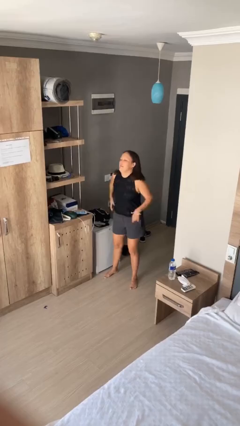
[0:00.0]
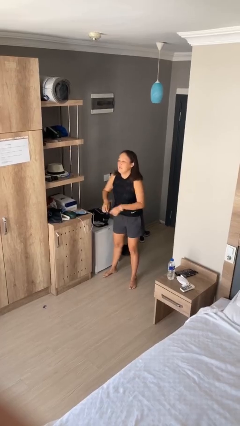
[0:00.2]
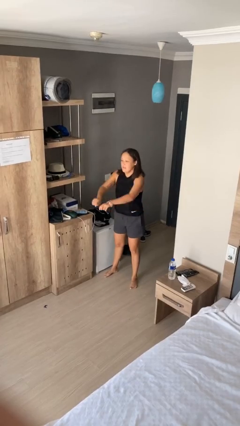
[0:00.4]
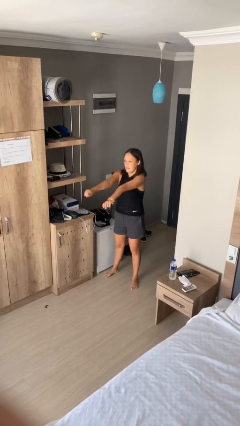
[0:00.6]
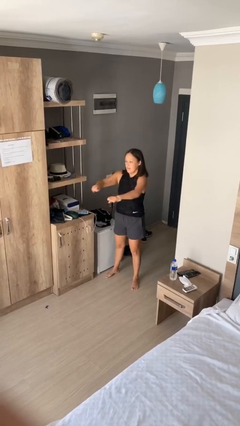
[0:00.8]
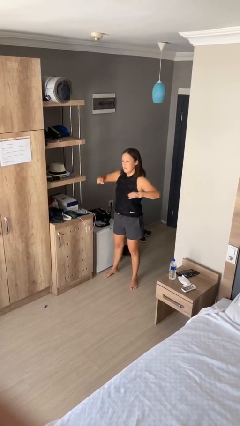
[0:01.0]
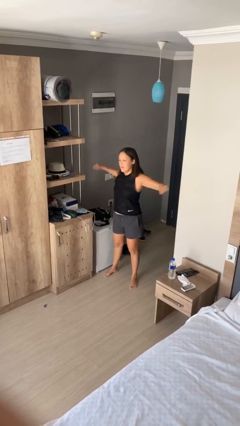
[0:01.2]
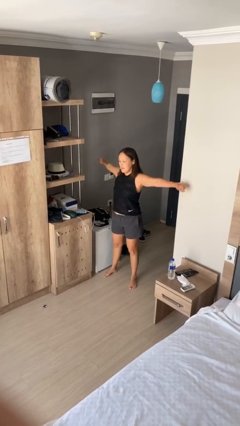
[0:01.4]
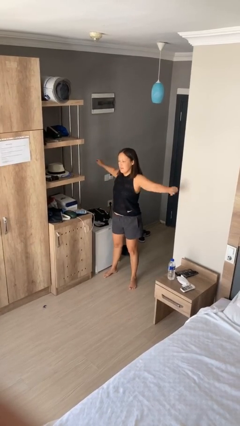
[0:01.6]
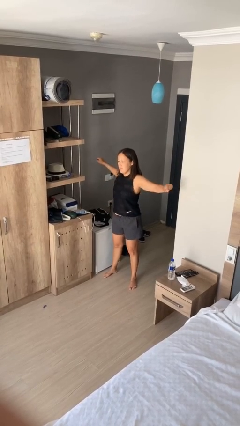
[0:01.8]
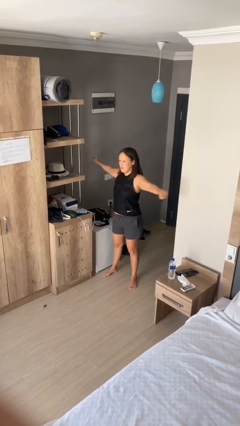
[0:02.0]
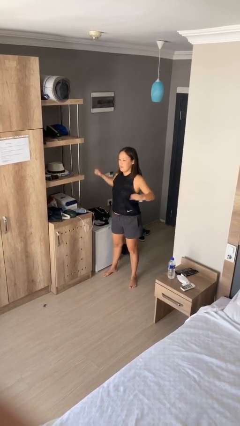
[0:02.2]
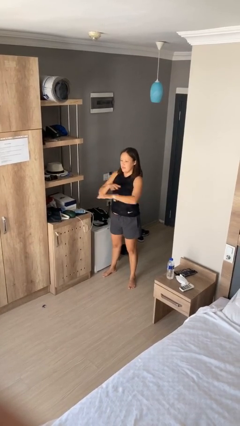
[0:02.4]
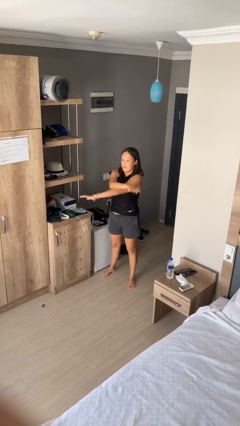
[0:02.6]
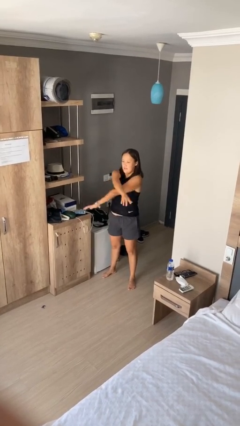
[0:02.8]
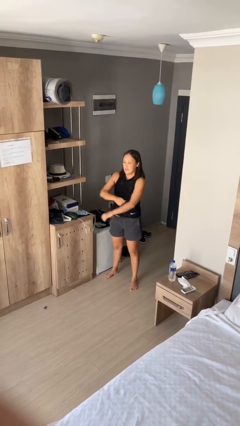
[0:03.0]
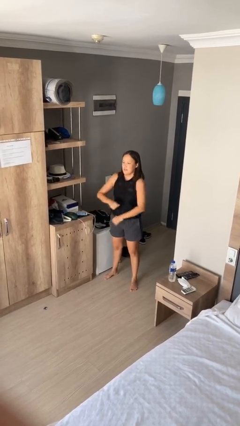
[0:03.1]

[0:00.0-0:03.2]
person stretches arms to side

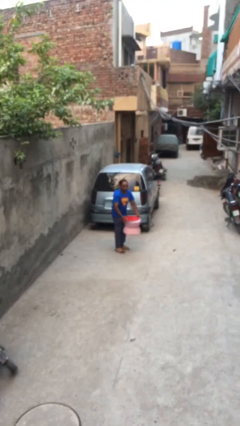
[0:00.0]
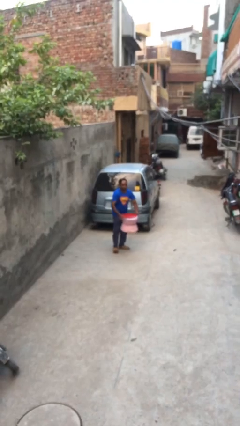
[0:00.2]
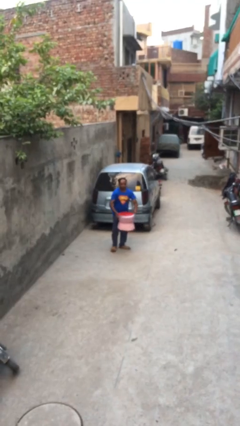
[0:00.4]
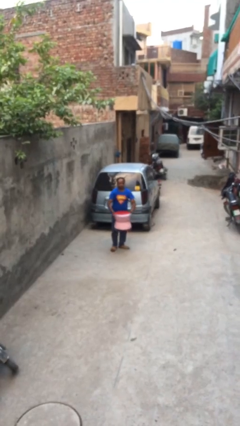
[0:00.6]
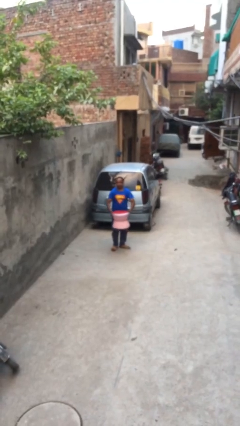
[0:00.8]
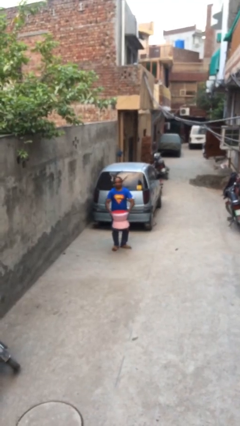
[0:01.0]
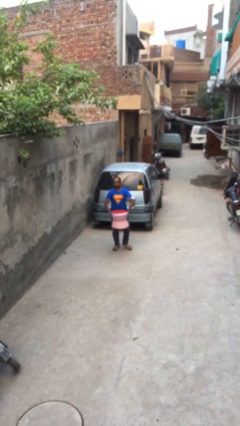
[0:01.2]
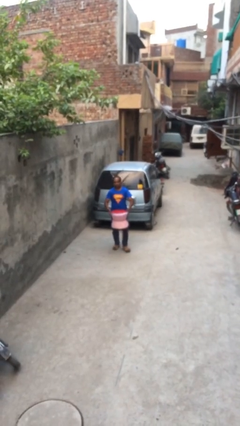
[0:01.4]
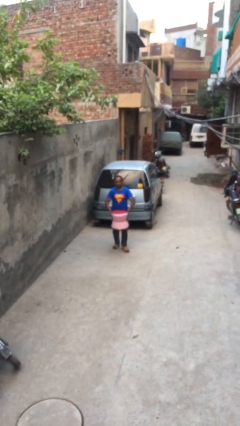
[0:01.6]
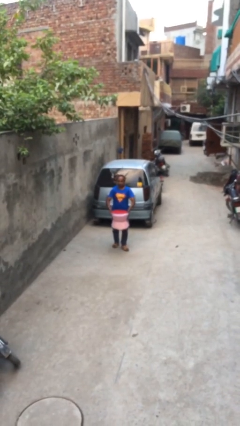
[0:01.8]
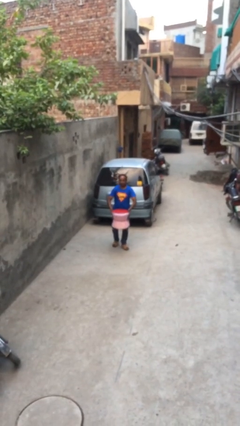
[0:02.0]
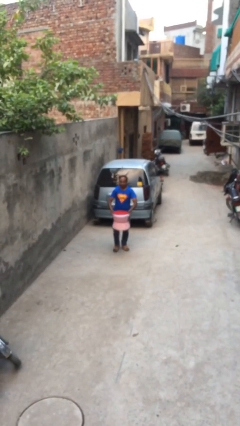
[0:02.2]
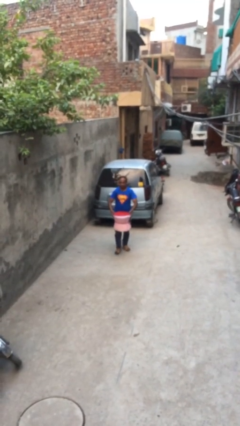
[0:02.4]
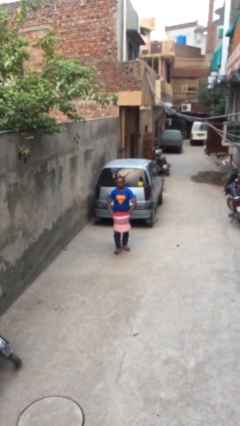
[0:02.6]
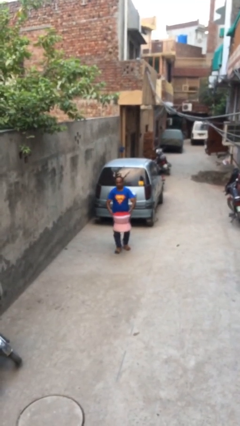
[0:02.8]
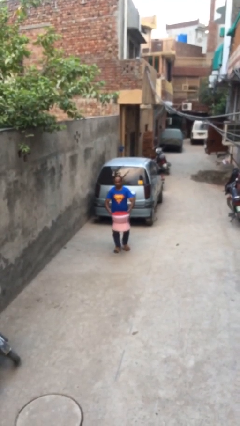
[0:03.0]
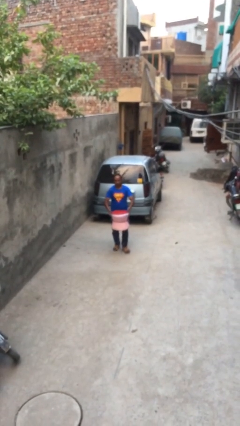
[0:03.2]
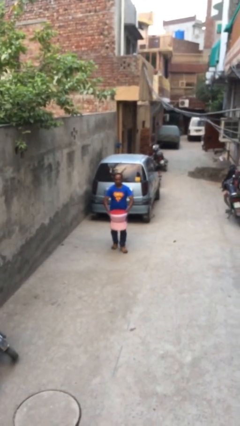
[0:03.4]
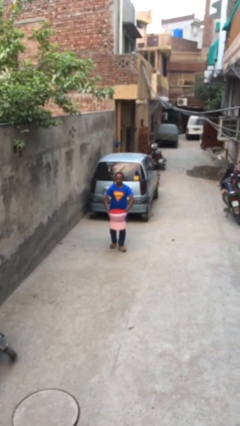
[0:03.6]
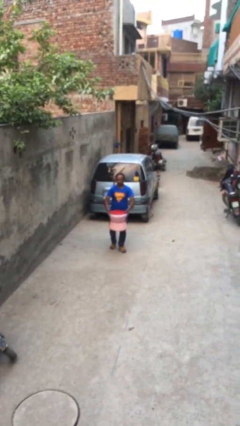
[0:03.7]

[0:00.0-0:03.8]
person carries heavy object

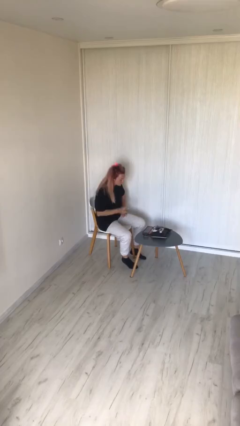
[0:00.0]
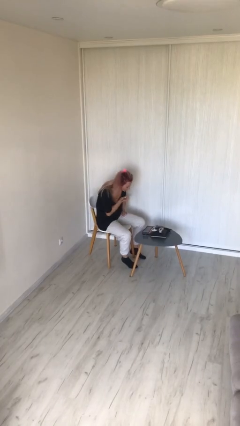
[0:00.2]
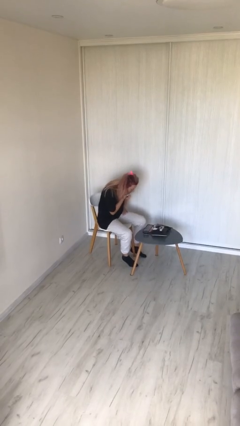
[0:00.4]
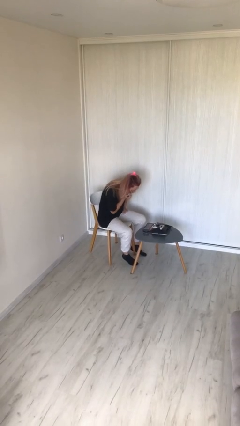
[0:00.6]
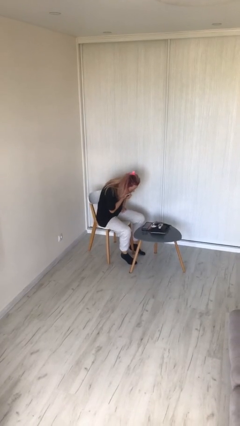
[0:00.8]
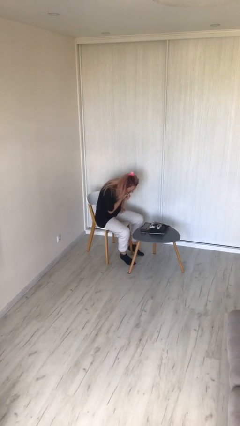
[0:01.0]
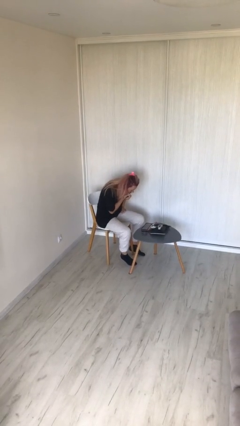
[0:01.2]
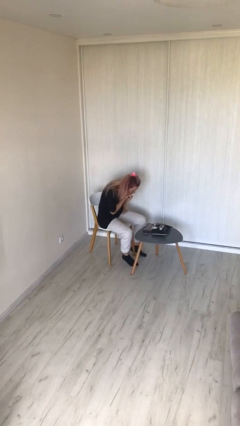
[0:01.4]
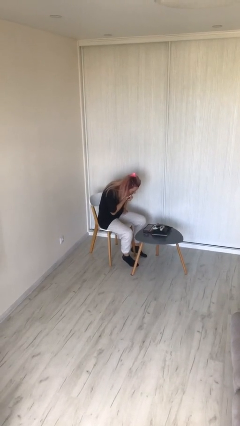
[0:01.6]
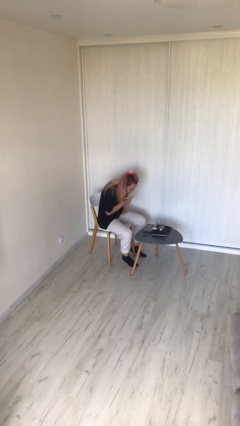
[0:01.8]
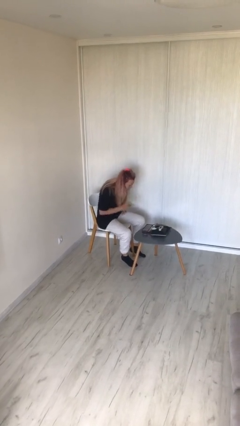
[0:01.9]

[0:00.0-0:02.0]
person applies eye makeup

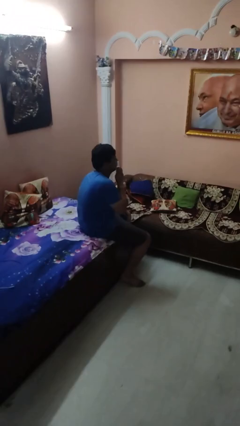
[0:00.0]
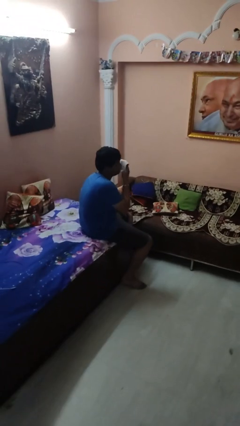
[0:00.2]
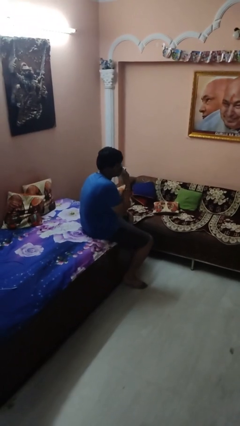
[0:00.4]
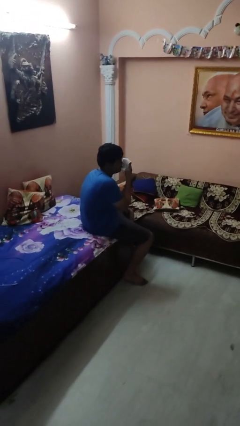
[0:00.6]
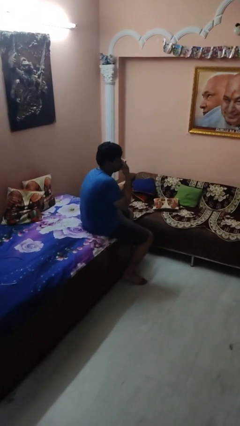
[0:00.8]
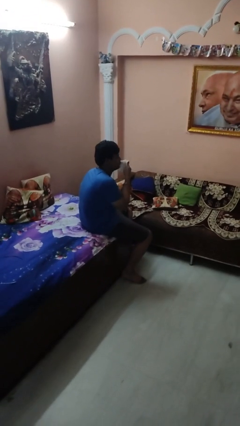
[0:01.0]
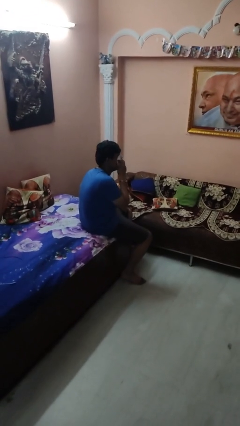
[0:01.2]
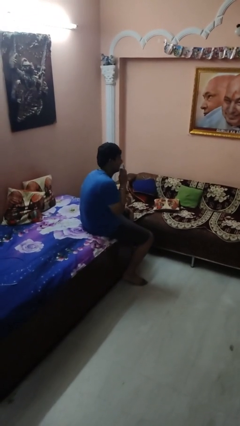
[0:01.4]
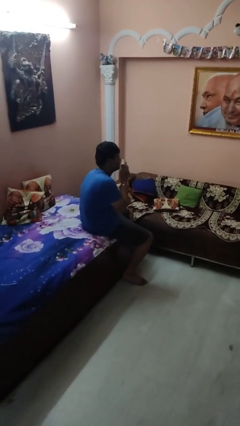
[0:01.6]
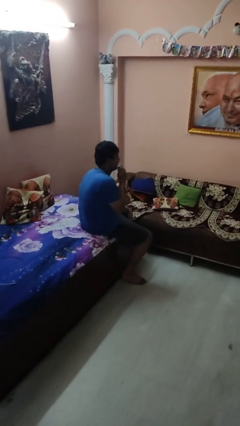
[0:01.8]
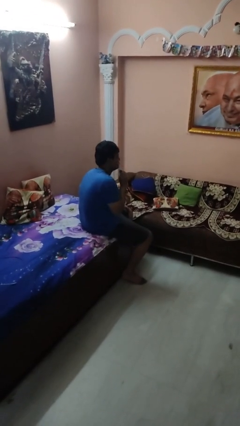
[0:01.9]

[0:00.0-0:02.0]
person wipes mouth with napkin

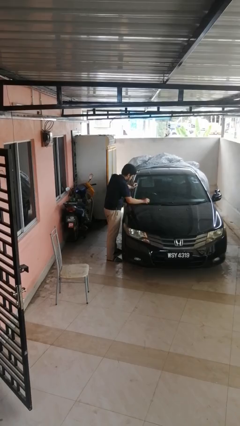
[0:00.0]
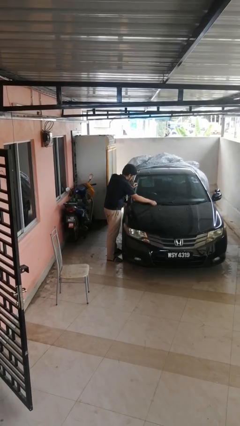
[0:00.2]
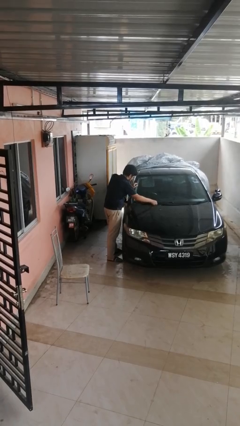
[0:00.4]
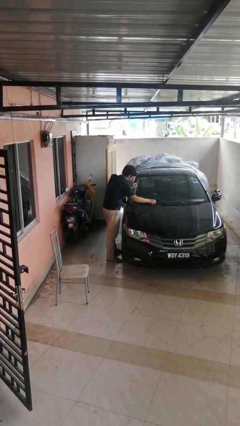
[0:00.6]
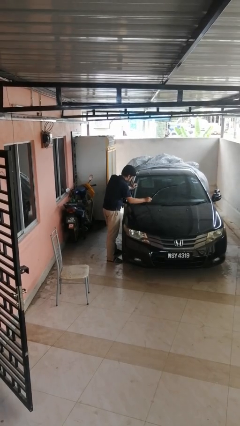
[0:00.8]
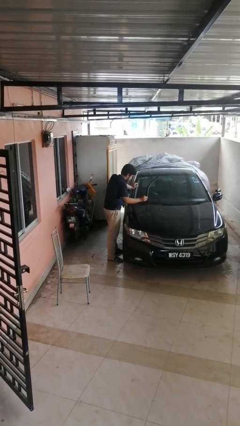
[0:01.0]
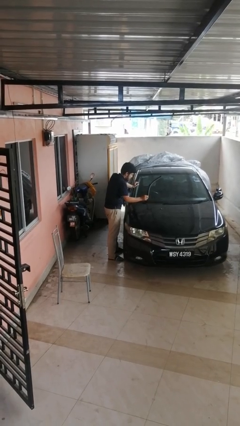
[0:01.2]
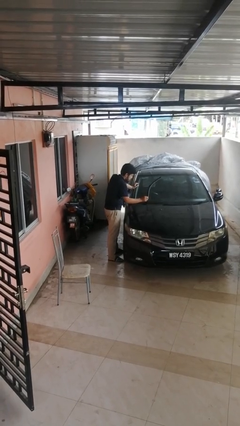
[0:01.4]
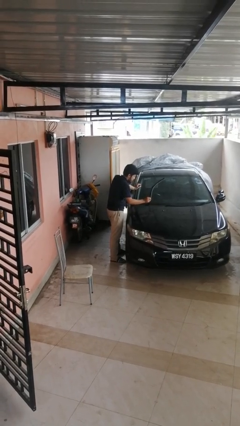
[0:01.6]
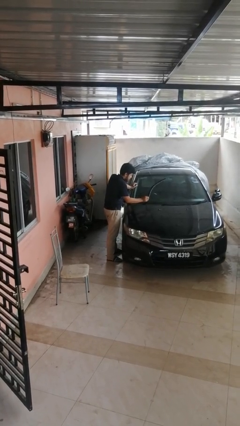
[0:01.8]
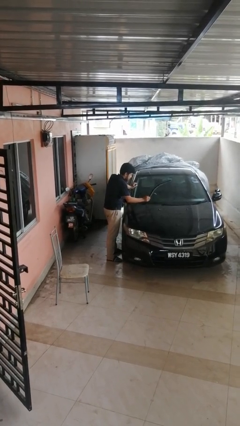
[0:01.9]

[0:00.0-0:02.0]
person flips up car wipers

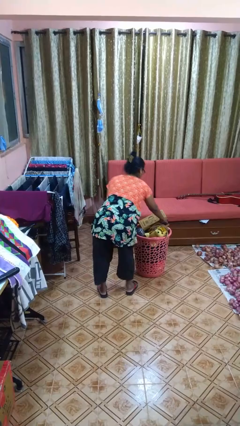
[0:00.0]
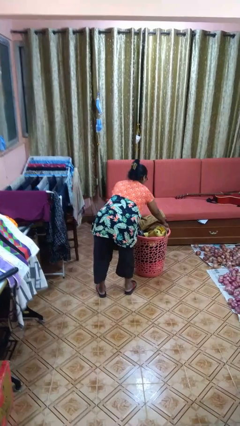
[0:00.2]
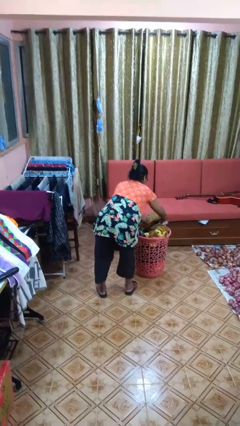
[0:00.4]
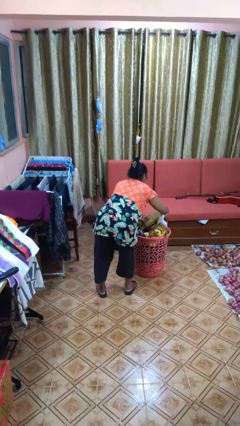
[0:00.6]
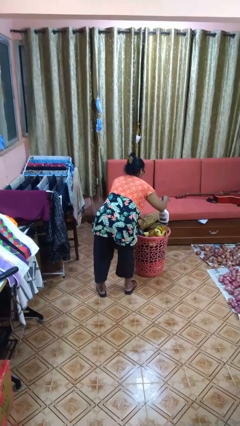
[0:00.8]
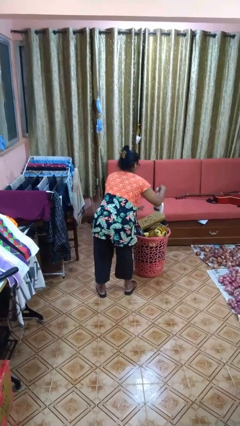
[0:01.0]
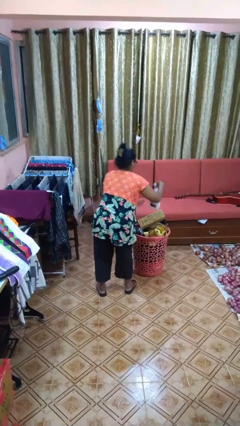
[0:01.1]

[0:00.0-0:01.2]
person takes object from basket

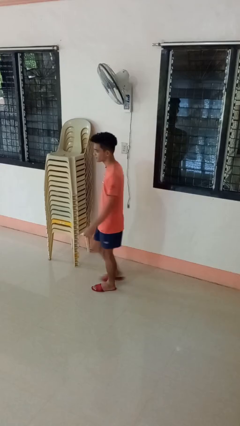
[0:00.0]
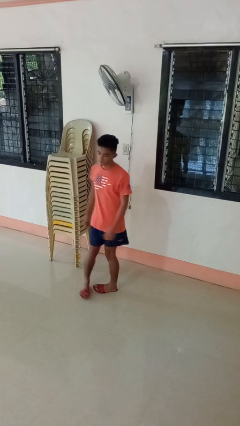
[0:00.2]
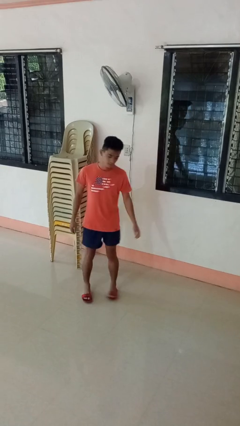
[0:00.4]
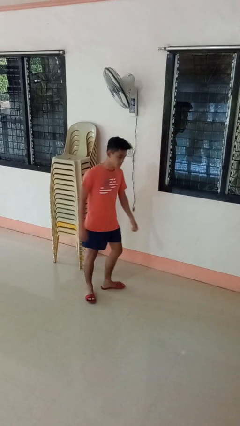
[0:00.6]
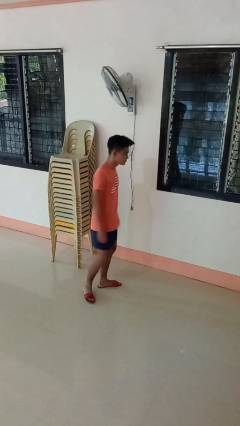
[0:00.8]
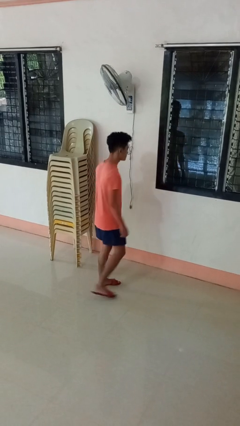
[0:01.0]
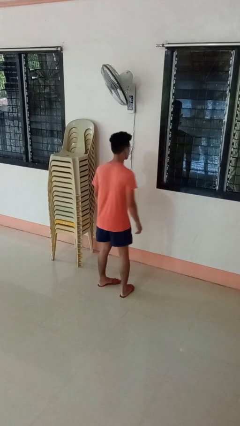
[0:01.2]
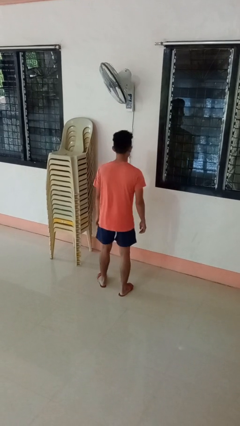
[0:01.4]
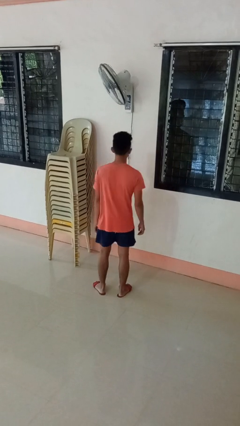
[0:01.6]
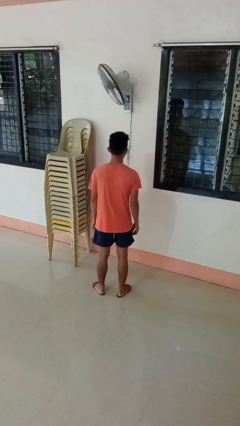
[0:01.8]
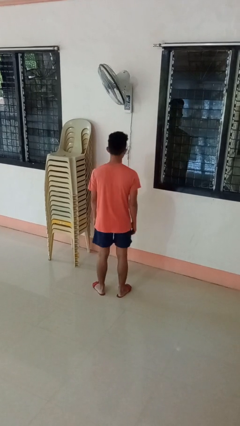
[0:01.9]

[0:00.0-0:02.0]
person twirls

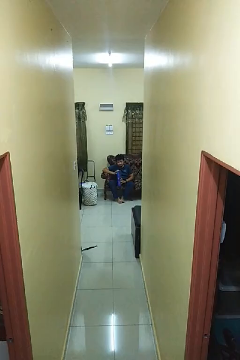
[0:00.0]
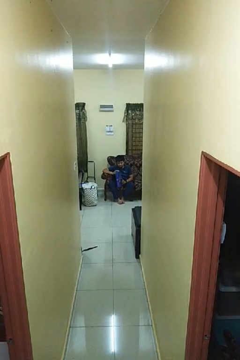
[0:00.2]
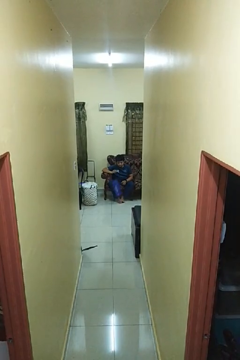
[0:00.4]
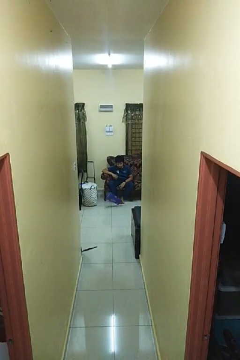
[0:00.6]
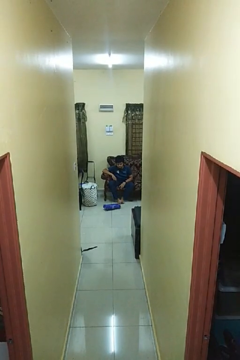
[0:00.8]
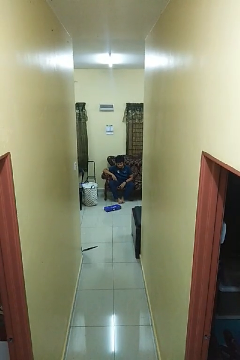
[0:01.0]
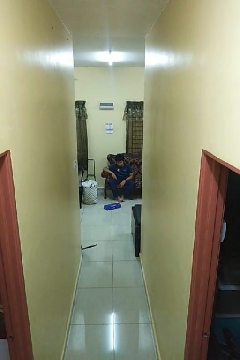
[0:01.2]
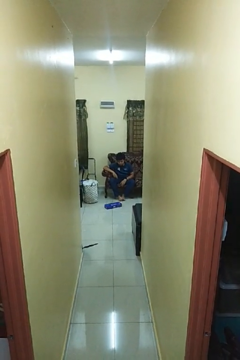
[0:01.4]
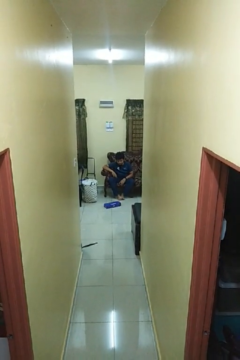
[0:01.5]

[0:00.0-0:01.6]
person drops object
